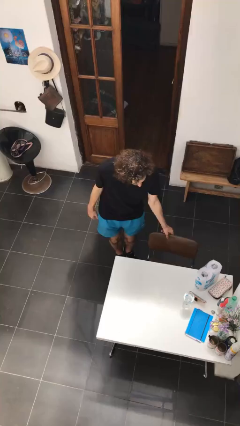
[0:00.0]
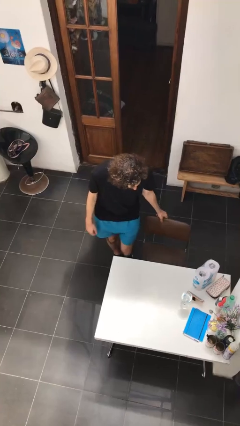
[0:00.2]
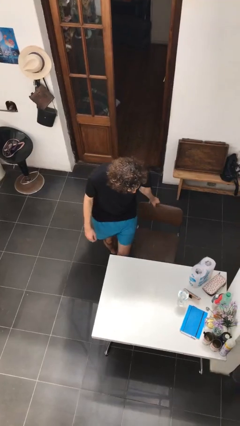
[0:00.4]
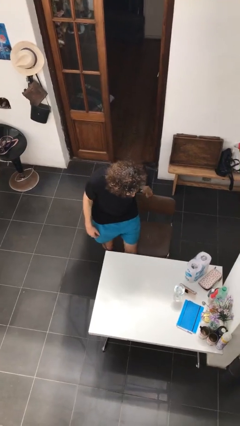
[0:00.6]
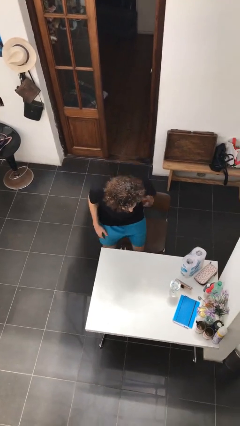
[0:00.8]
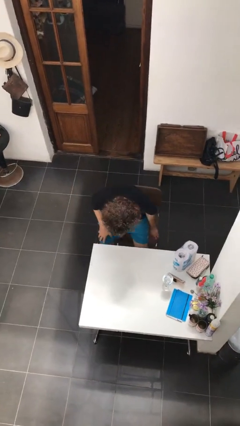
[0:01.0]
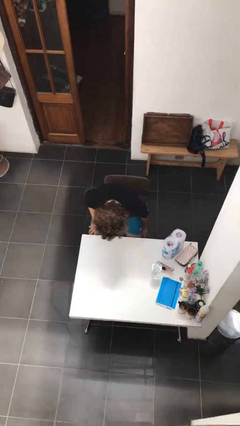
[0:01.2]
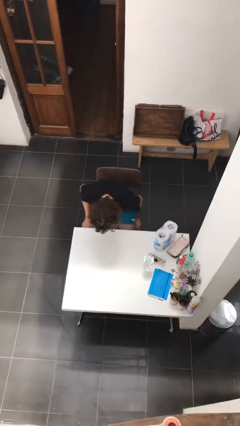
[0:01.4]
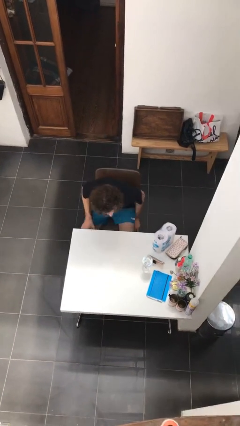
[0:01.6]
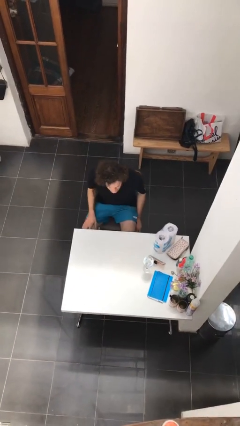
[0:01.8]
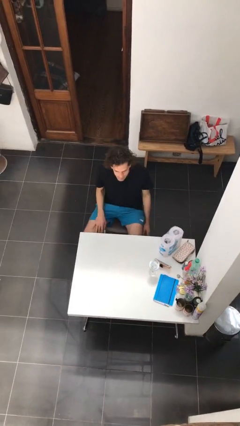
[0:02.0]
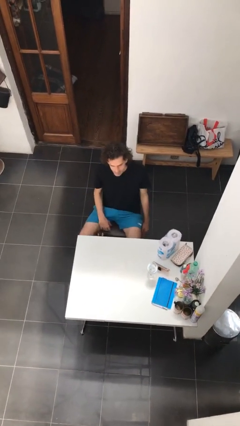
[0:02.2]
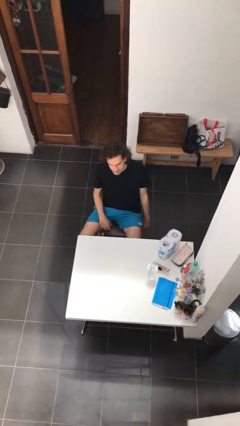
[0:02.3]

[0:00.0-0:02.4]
person sits down

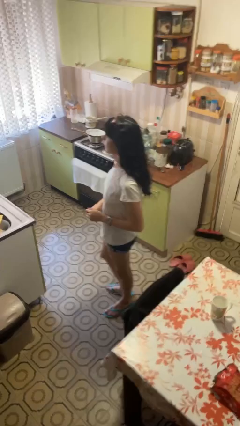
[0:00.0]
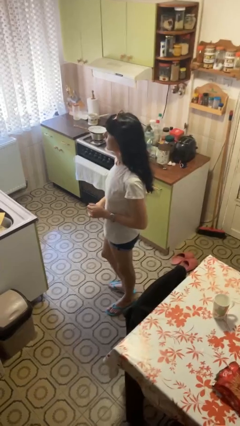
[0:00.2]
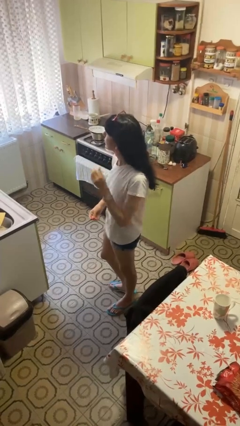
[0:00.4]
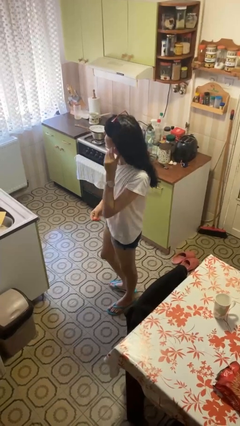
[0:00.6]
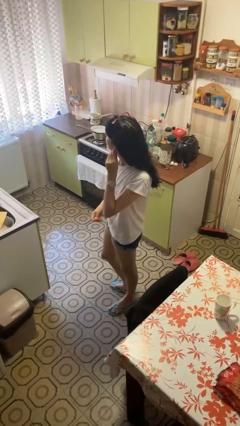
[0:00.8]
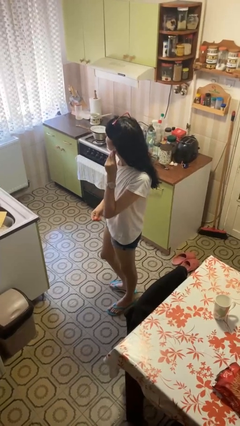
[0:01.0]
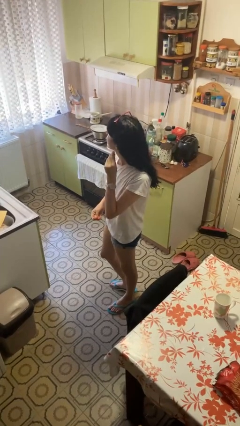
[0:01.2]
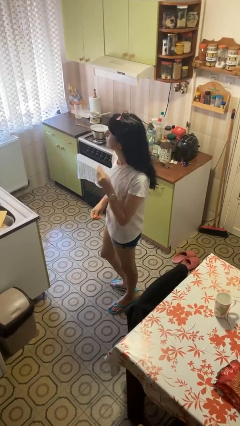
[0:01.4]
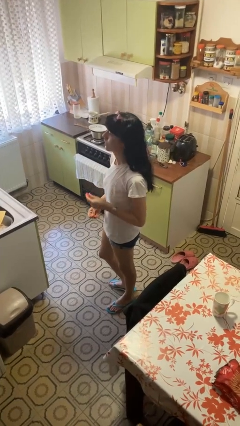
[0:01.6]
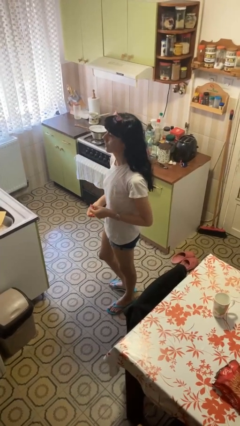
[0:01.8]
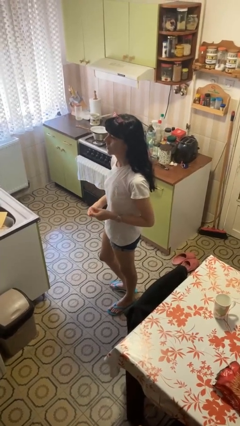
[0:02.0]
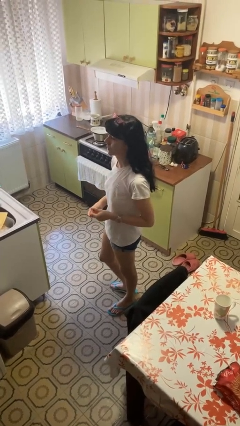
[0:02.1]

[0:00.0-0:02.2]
person takes off earrings

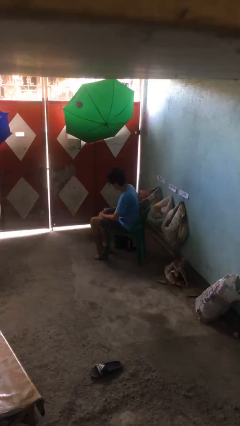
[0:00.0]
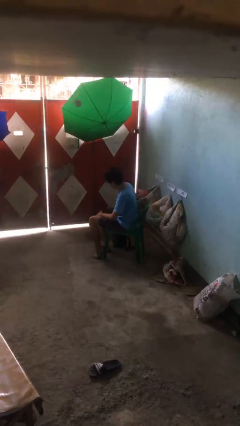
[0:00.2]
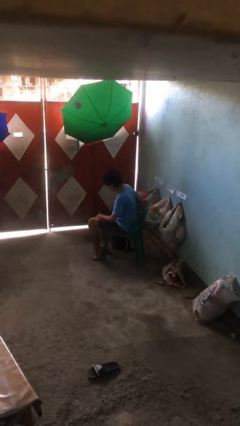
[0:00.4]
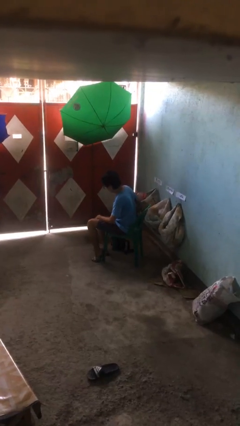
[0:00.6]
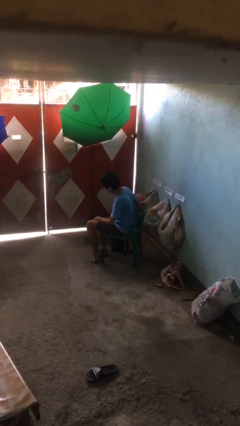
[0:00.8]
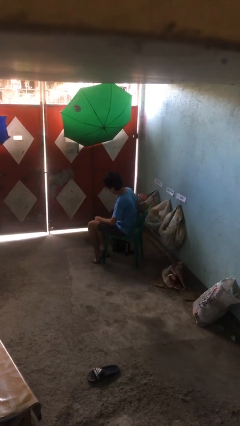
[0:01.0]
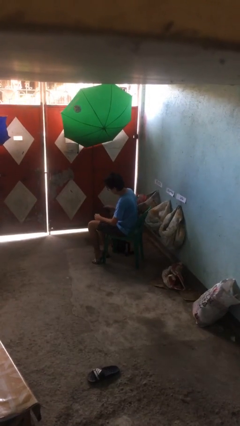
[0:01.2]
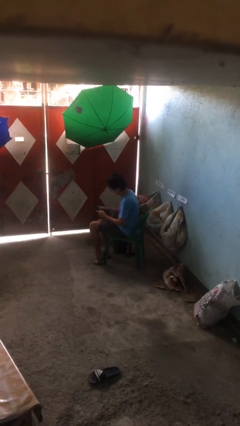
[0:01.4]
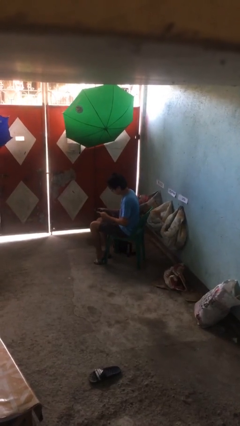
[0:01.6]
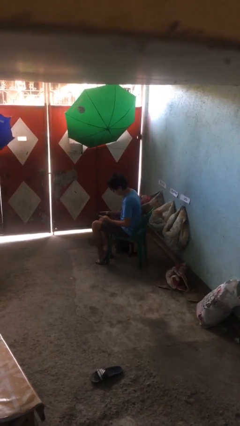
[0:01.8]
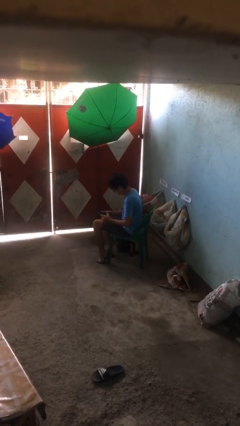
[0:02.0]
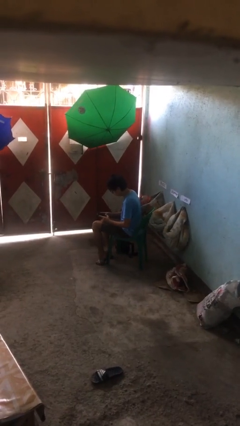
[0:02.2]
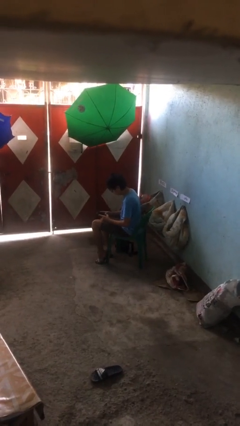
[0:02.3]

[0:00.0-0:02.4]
person takes phone from pocket

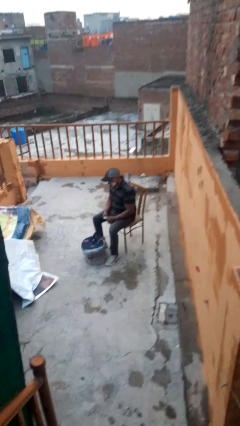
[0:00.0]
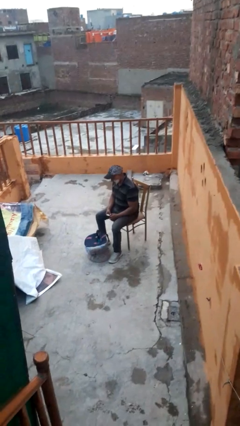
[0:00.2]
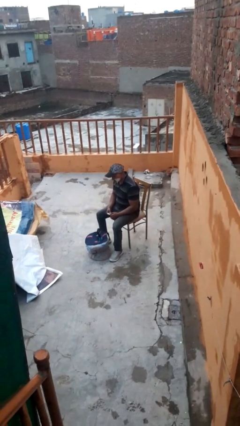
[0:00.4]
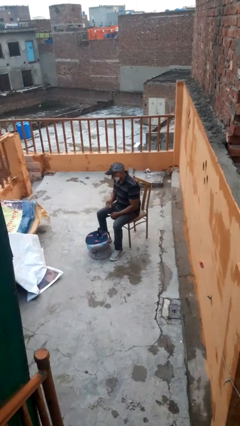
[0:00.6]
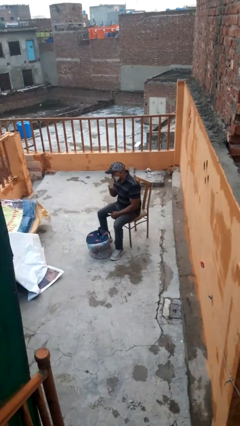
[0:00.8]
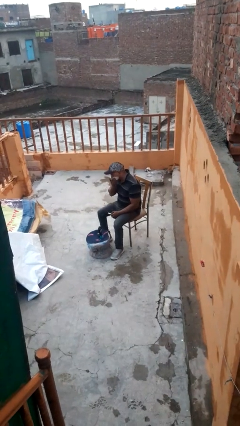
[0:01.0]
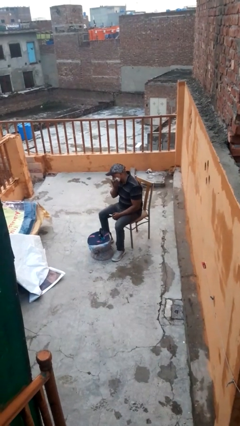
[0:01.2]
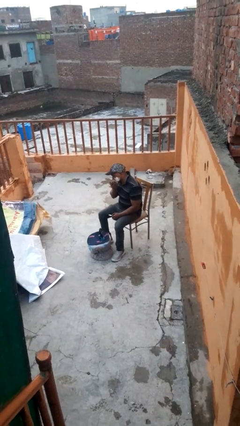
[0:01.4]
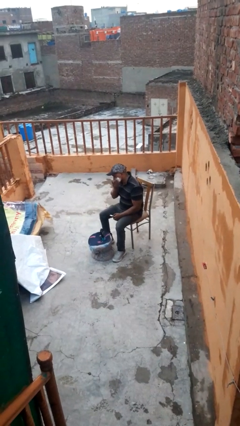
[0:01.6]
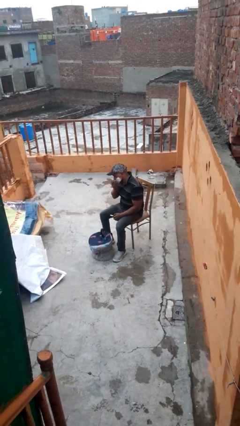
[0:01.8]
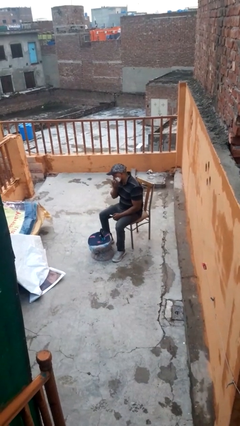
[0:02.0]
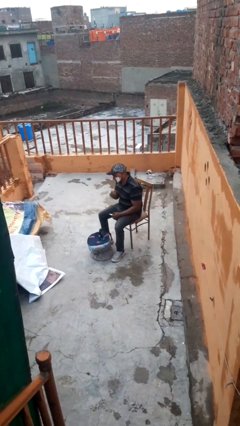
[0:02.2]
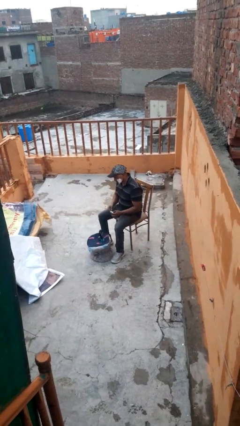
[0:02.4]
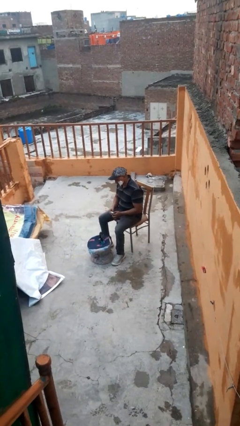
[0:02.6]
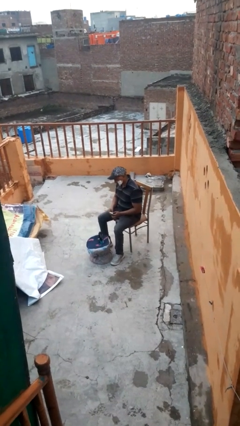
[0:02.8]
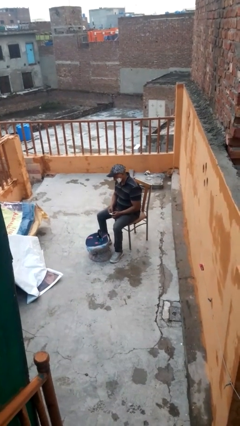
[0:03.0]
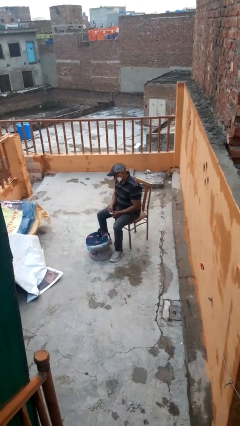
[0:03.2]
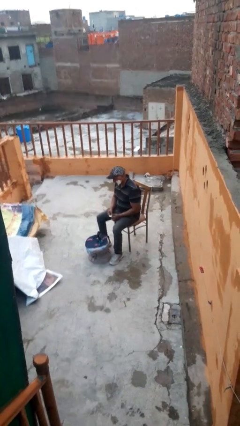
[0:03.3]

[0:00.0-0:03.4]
person applies shaving cream

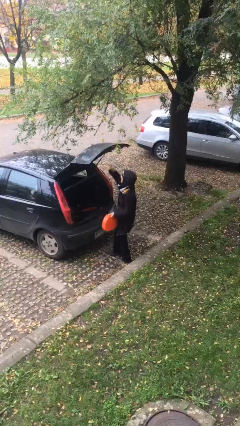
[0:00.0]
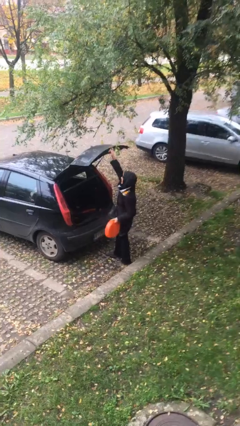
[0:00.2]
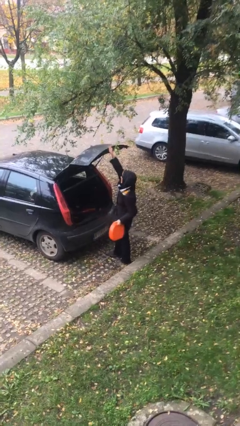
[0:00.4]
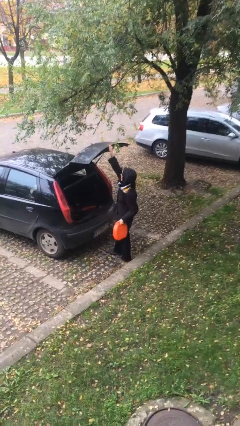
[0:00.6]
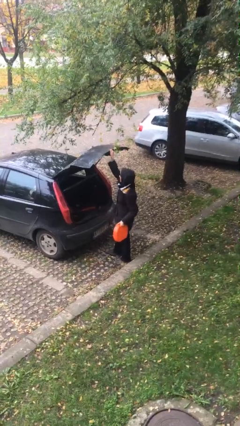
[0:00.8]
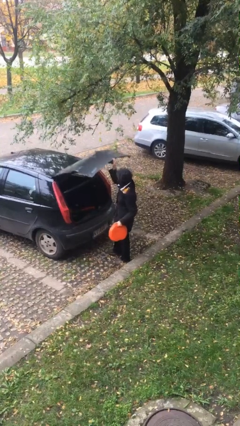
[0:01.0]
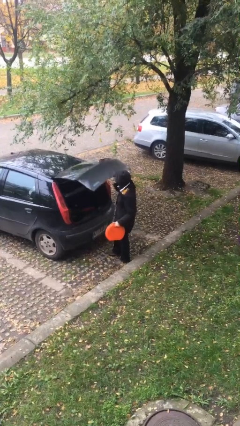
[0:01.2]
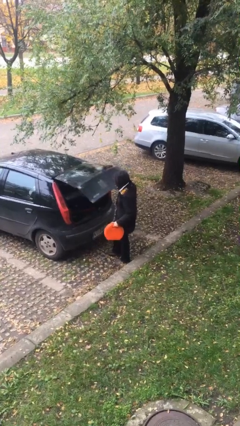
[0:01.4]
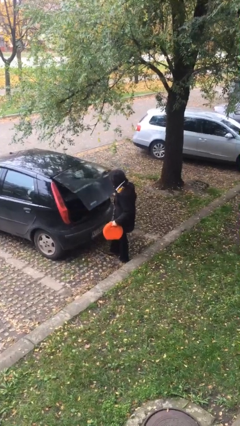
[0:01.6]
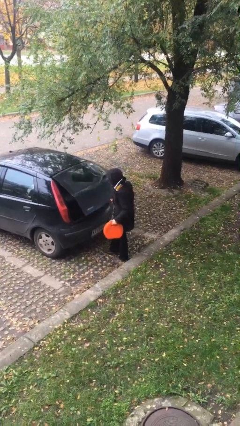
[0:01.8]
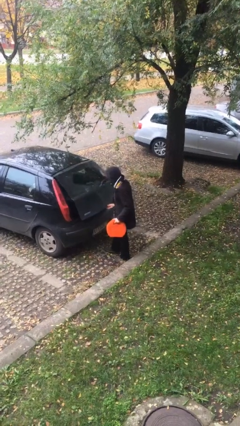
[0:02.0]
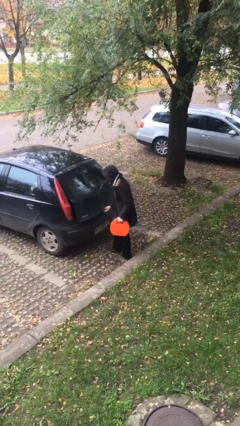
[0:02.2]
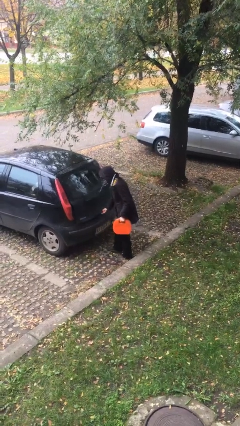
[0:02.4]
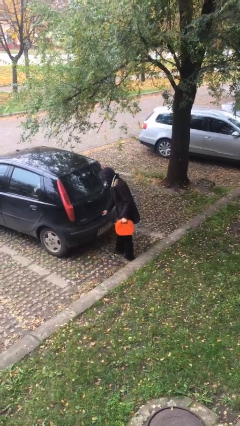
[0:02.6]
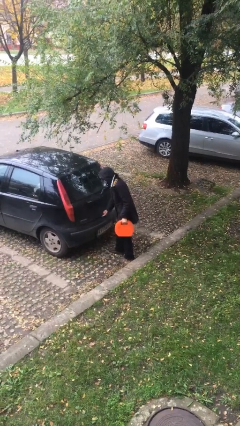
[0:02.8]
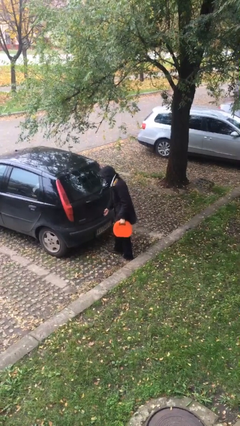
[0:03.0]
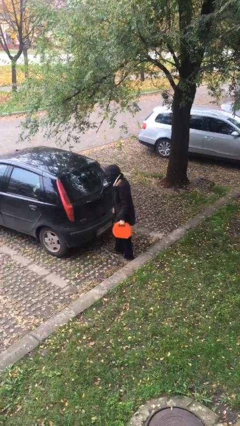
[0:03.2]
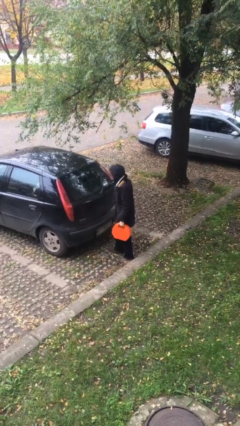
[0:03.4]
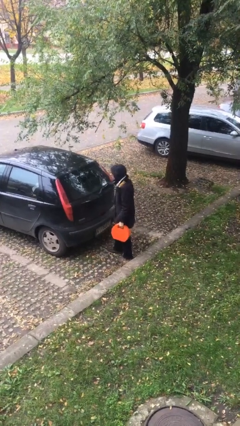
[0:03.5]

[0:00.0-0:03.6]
person closes car trunk

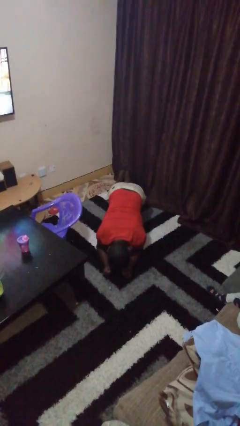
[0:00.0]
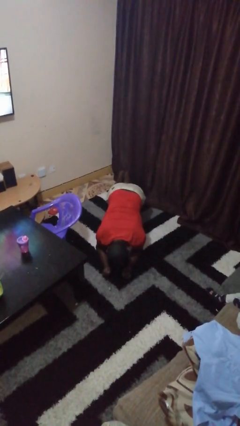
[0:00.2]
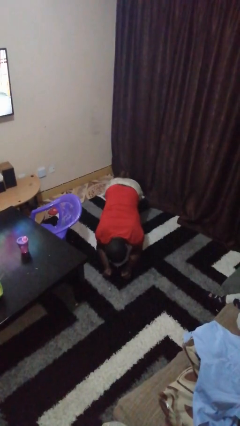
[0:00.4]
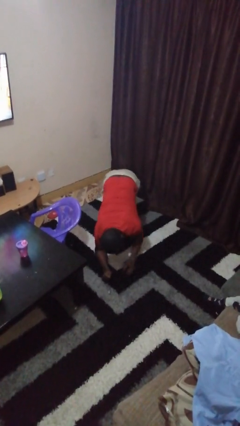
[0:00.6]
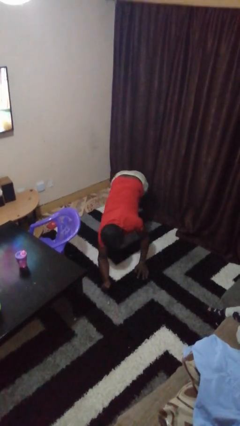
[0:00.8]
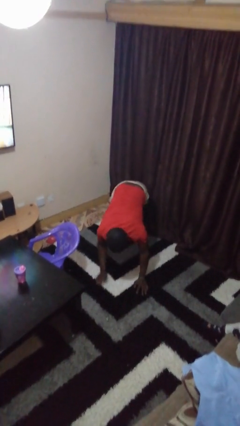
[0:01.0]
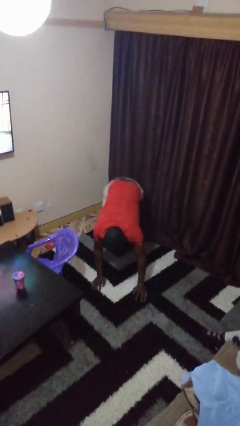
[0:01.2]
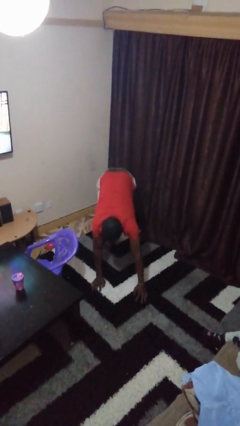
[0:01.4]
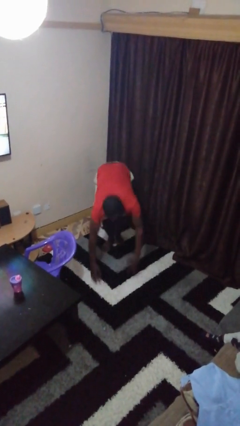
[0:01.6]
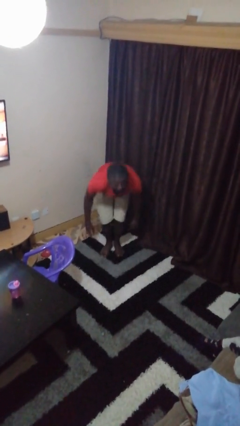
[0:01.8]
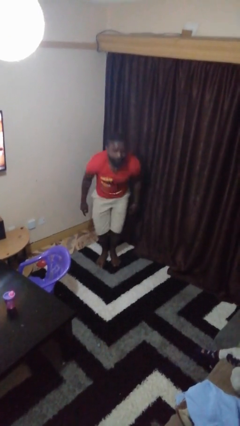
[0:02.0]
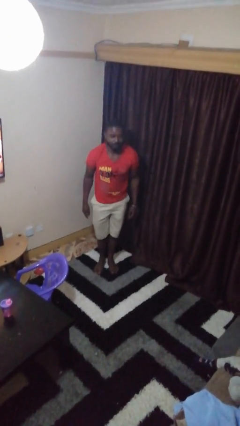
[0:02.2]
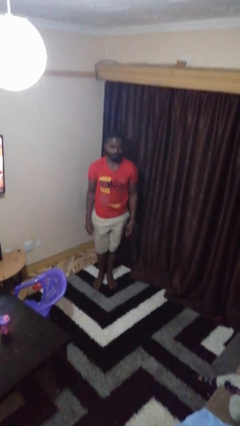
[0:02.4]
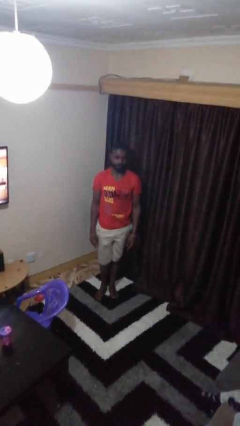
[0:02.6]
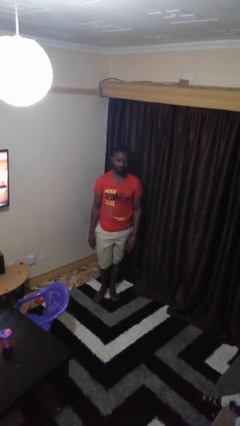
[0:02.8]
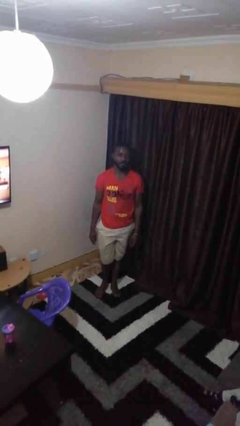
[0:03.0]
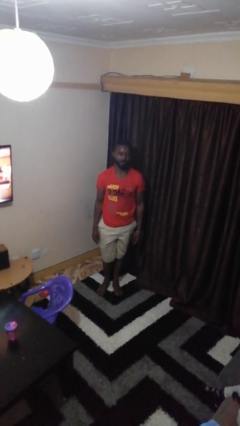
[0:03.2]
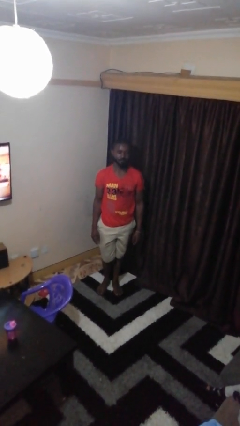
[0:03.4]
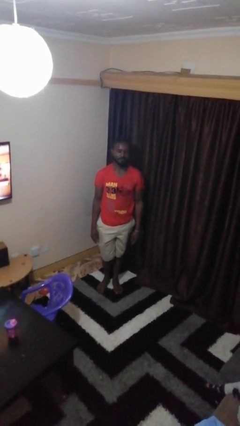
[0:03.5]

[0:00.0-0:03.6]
person stands up from floor
